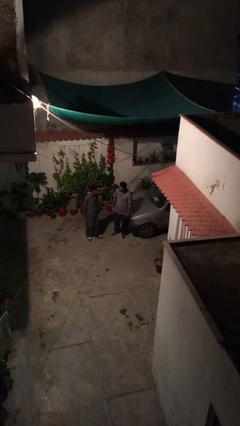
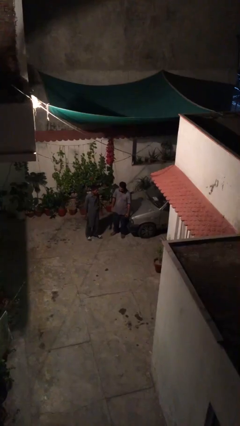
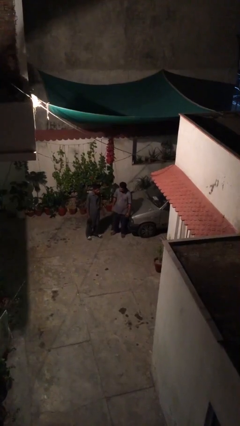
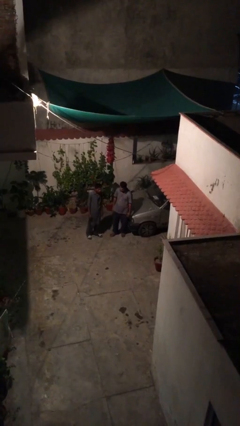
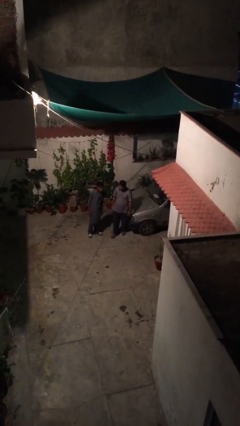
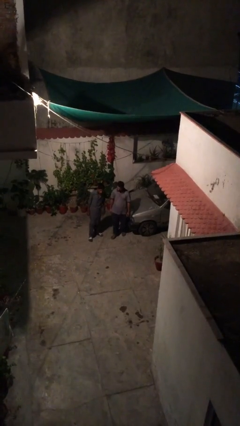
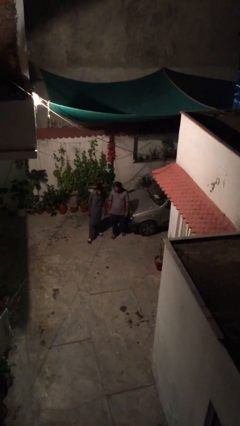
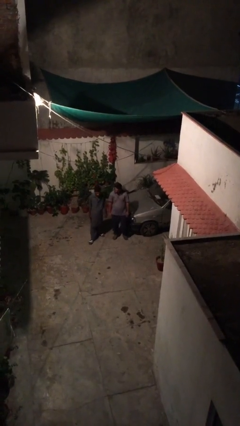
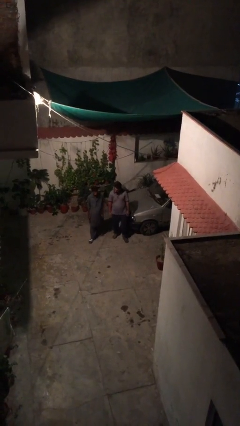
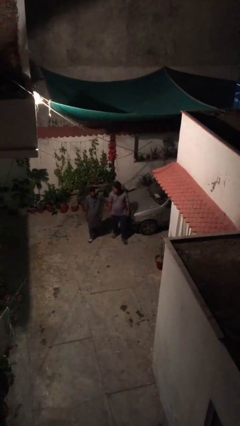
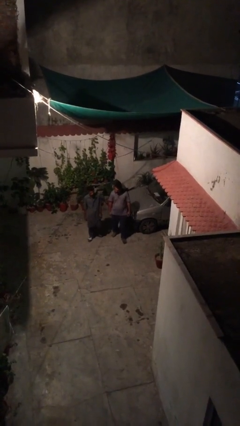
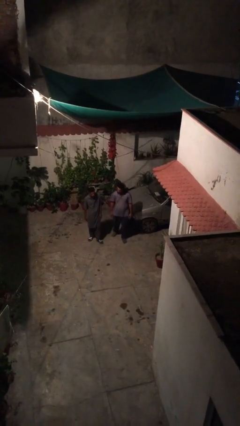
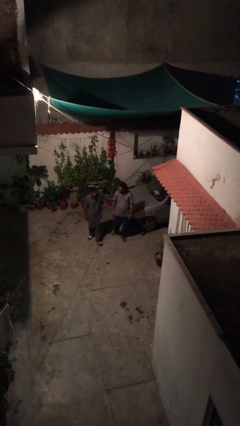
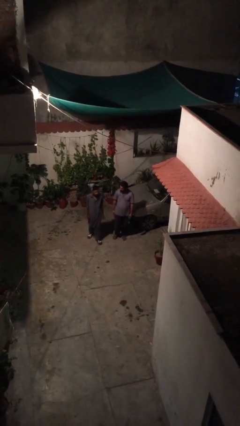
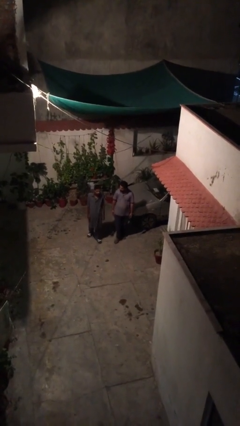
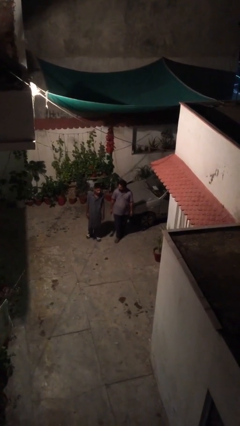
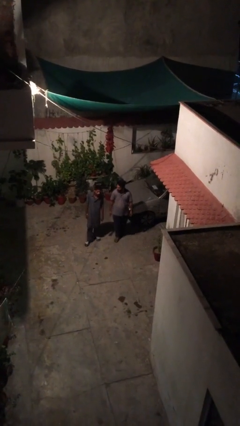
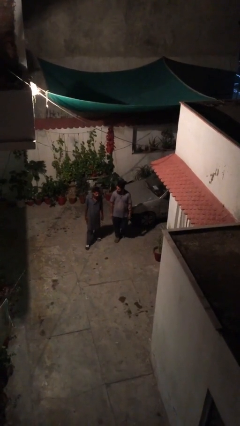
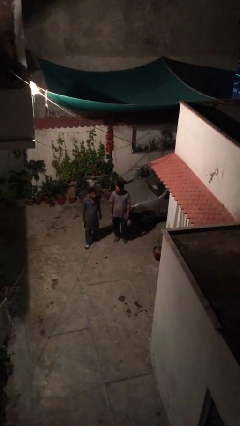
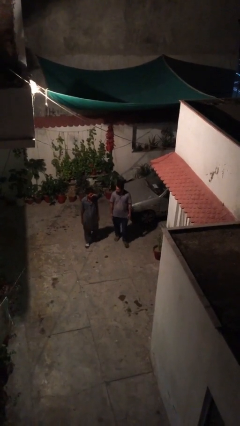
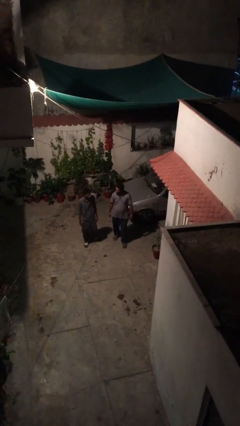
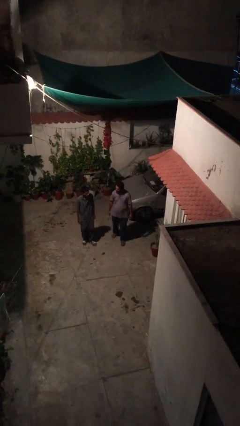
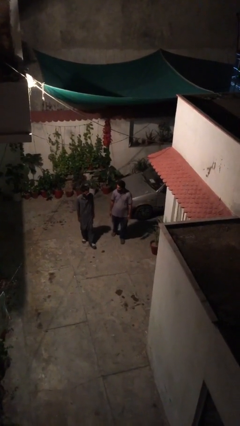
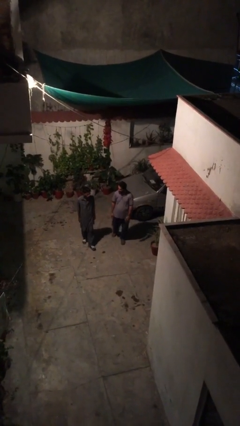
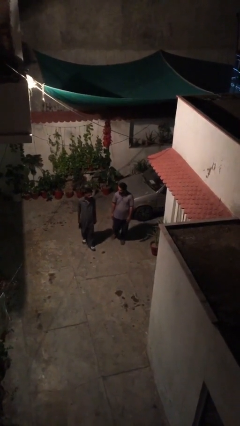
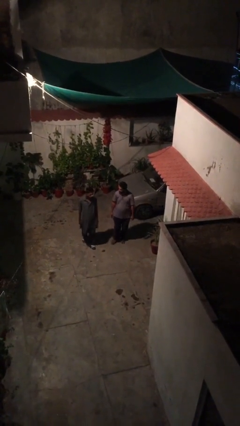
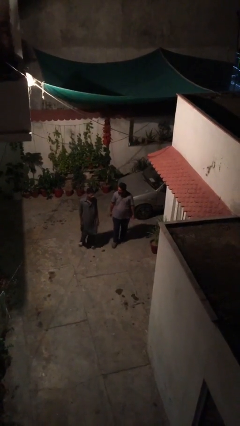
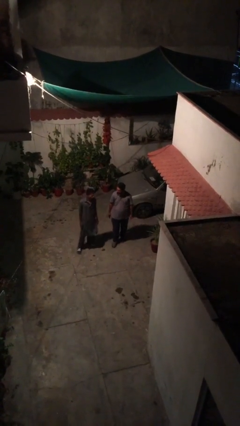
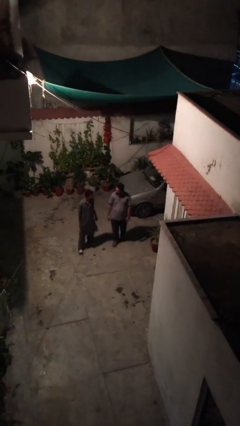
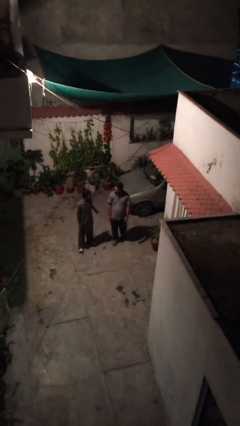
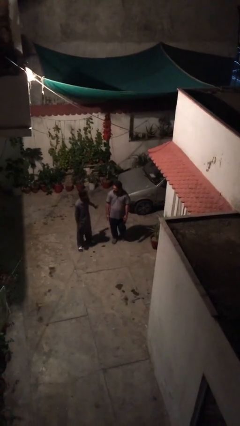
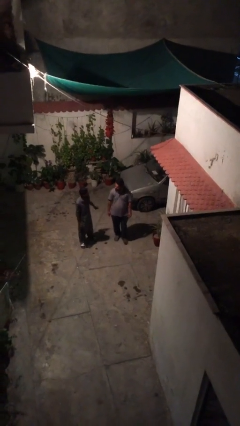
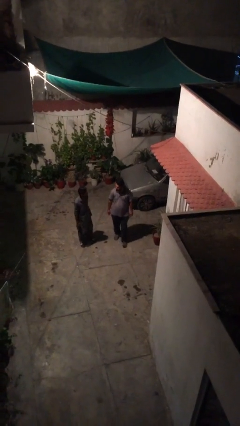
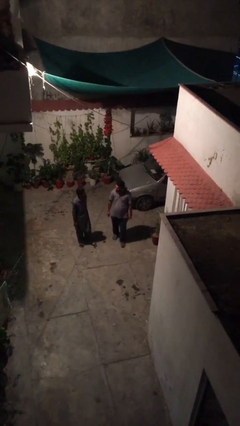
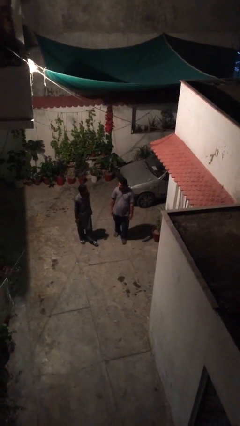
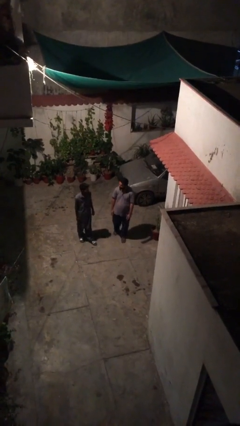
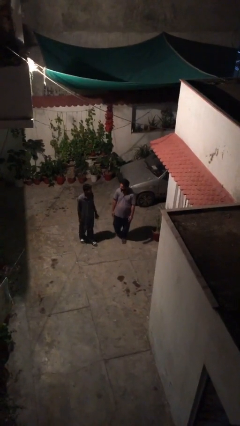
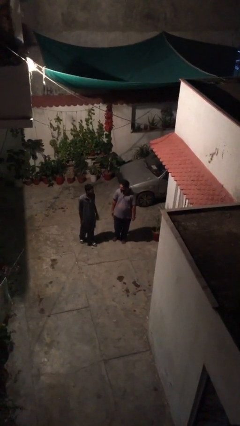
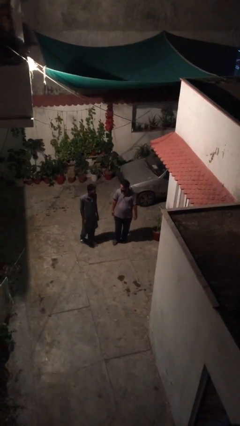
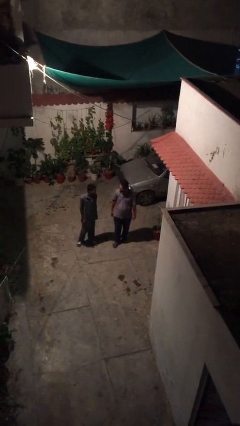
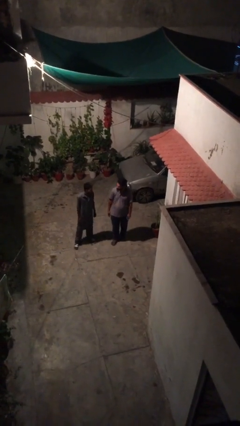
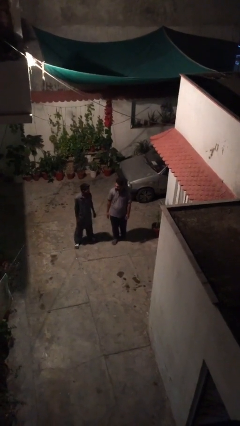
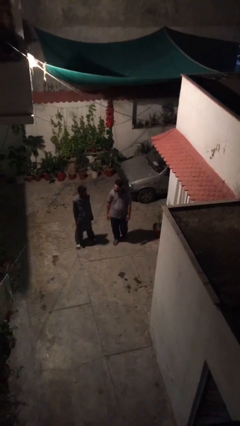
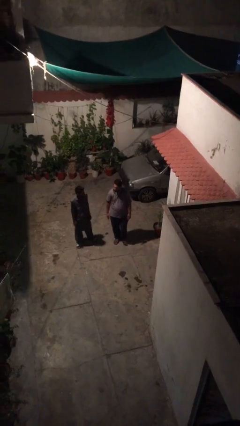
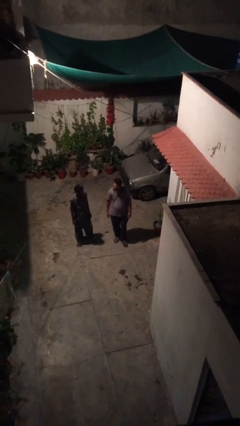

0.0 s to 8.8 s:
person talks to person

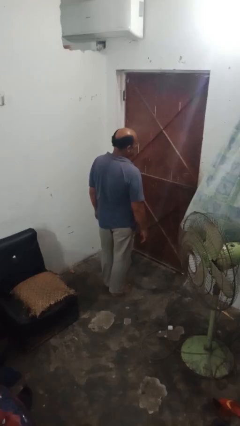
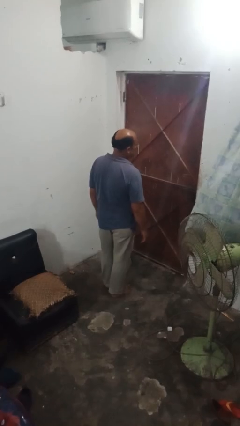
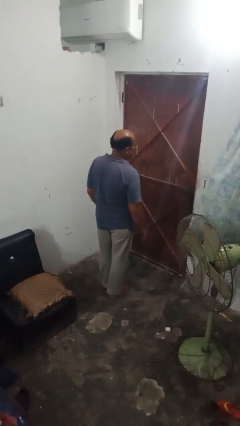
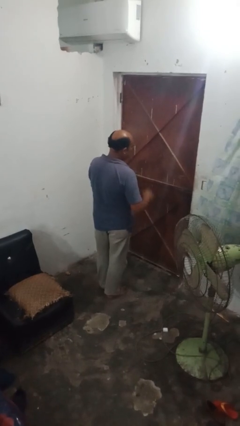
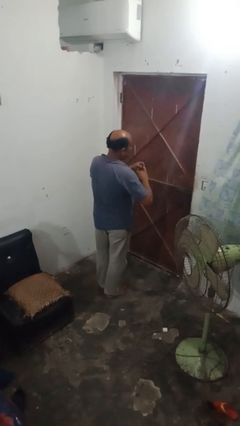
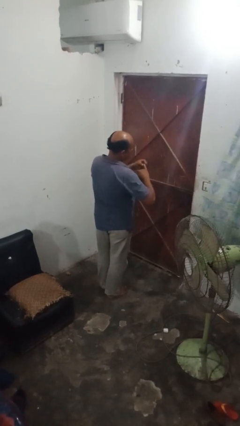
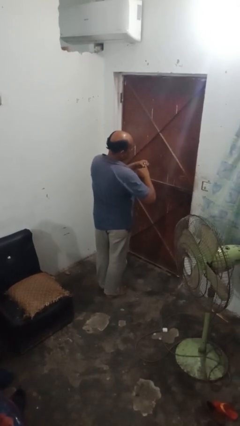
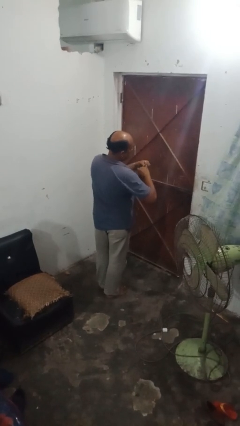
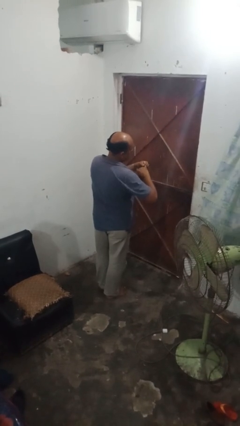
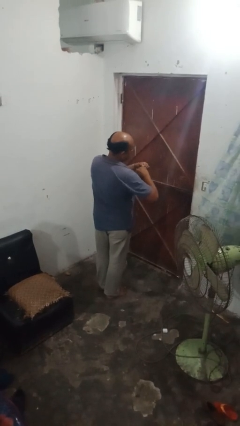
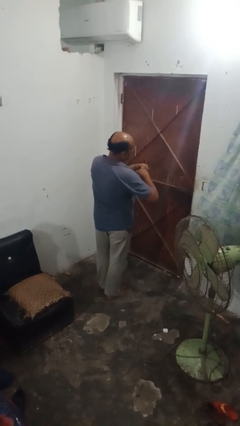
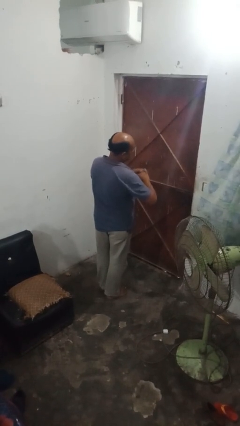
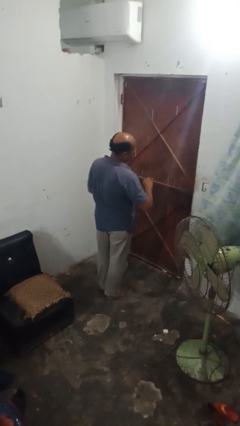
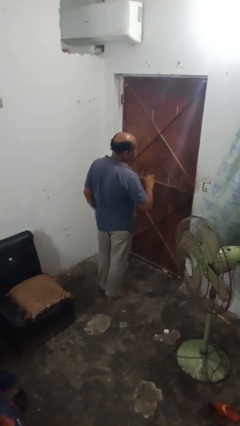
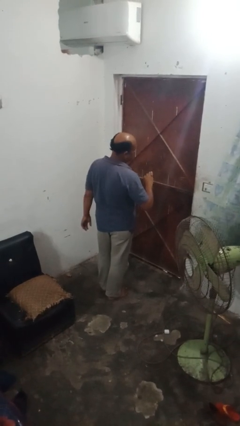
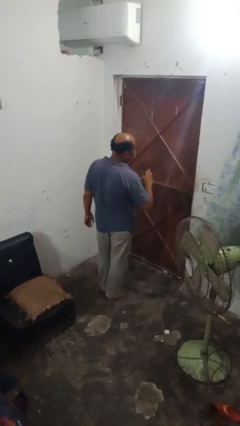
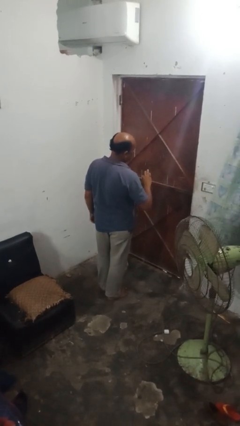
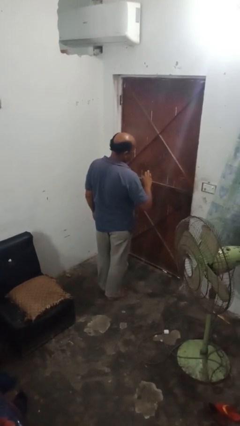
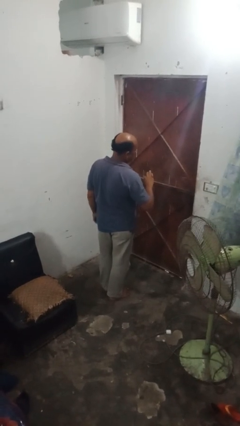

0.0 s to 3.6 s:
person puts on ring

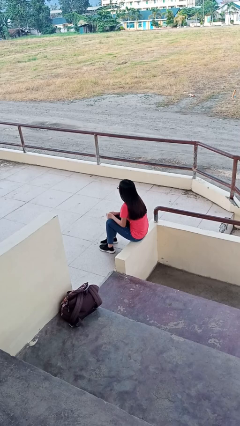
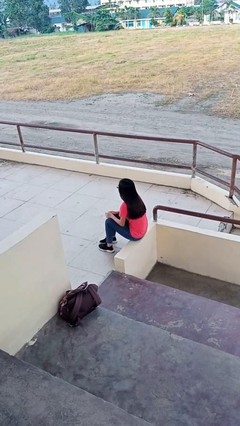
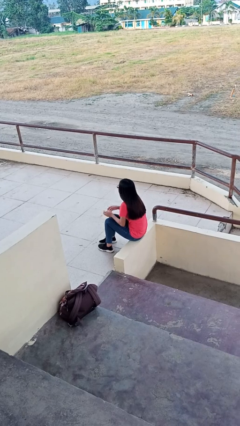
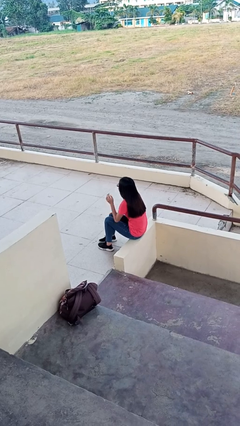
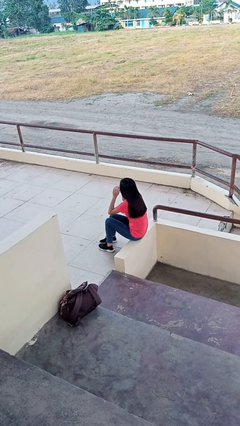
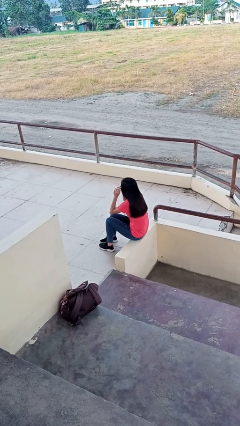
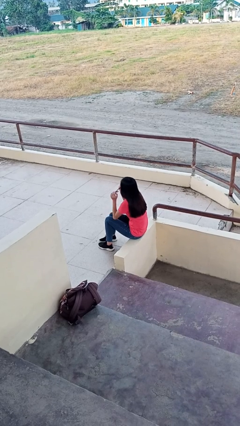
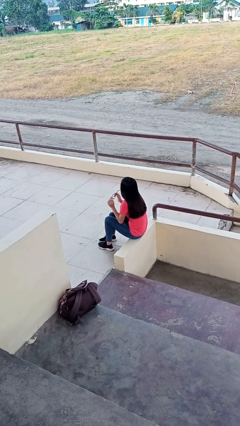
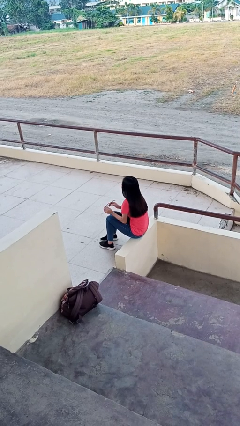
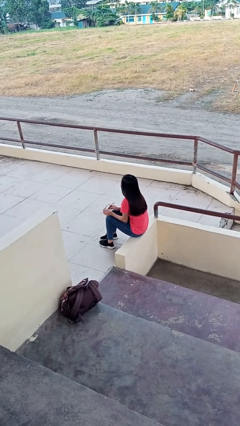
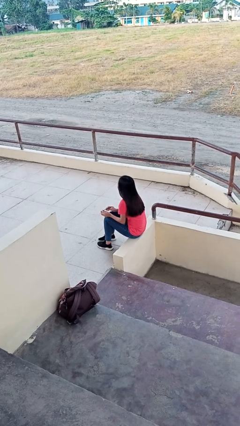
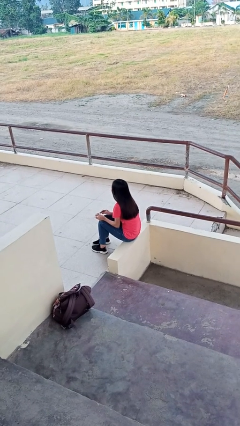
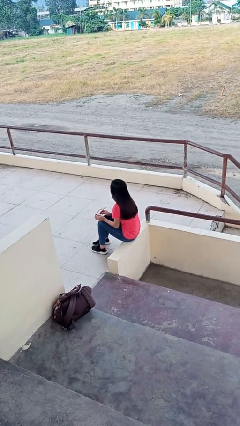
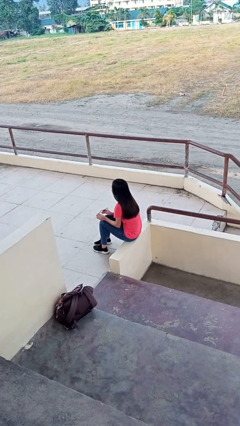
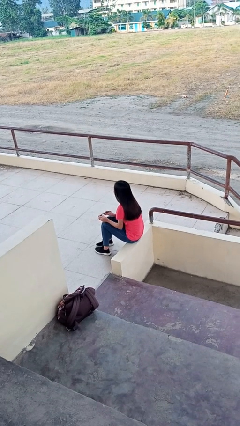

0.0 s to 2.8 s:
person takes off glasses

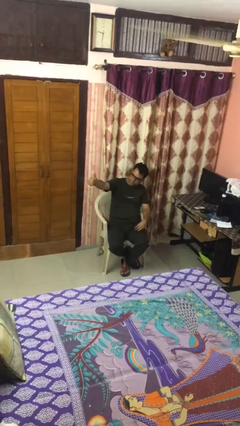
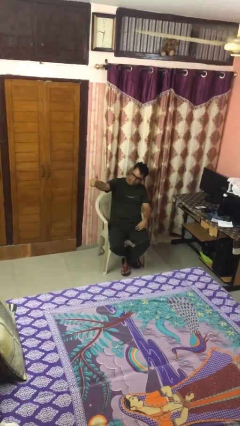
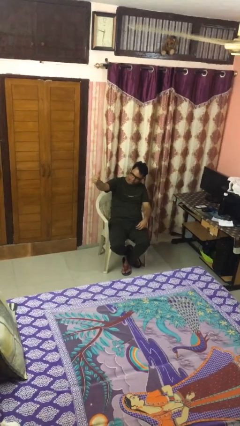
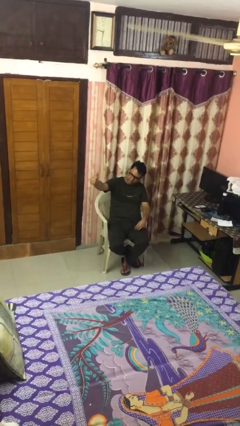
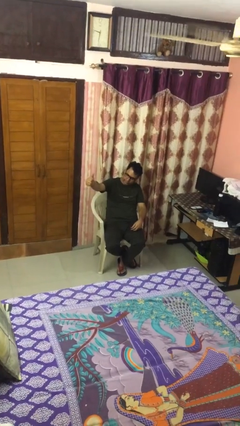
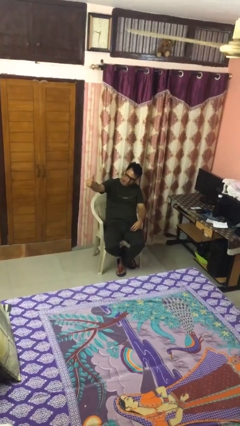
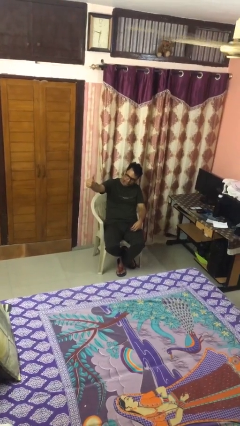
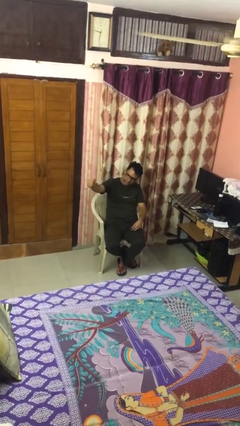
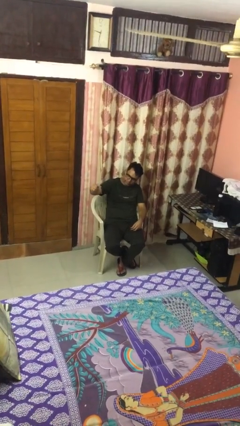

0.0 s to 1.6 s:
person gestures thumbs up

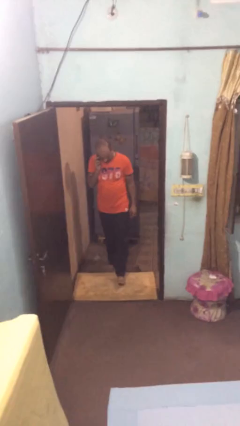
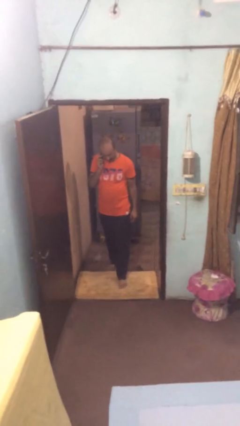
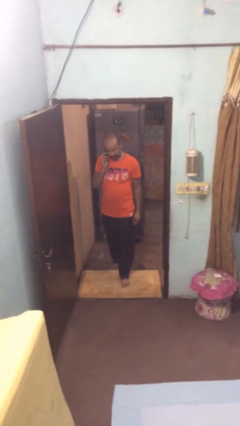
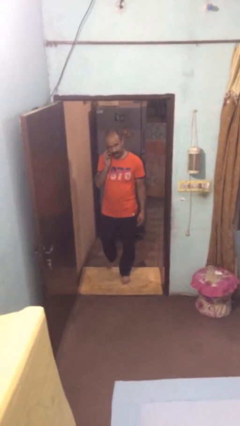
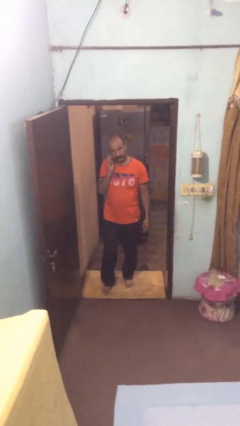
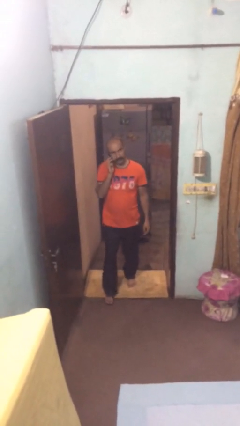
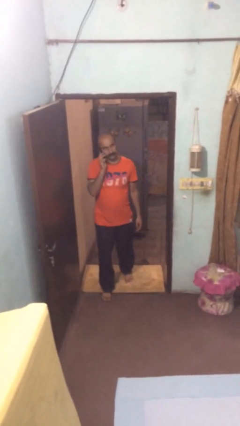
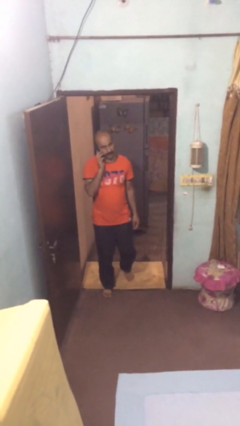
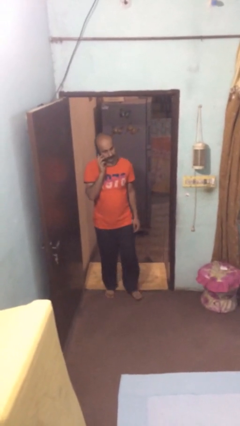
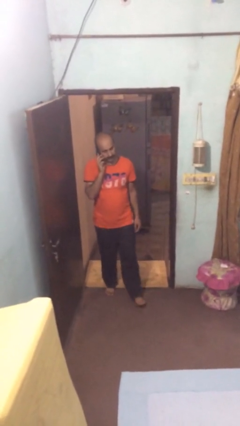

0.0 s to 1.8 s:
person enters scene through structure
